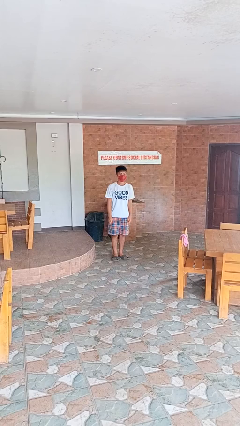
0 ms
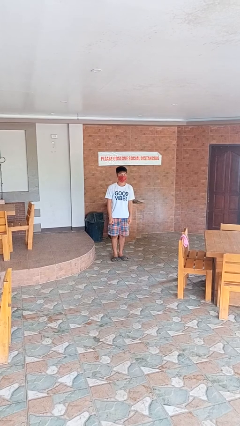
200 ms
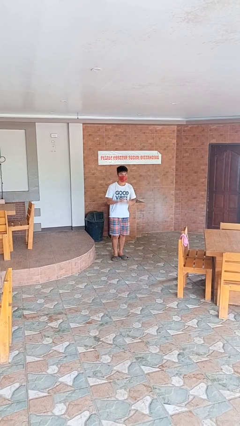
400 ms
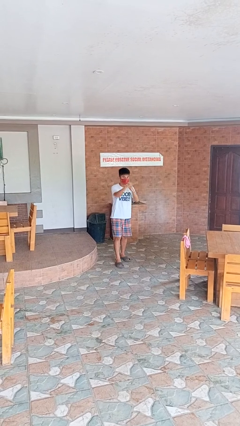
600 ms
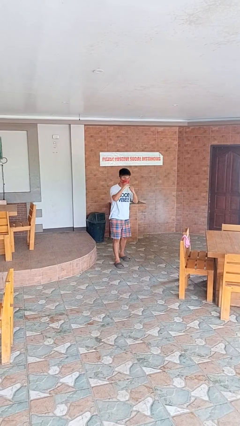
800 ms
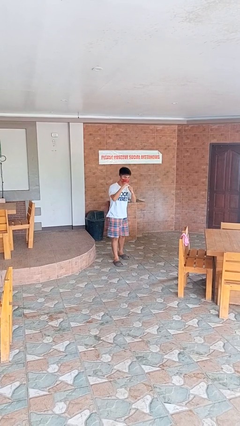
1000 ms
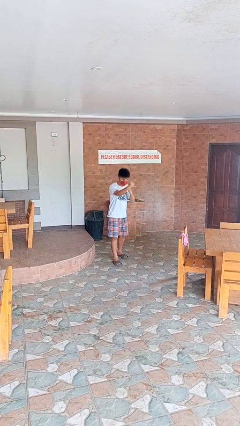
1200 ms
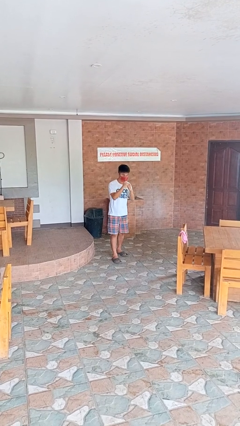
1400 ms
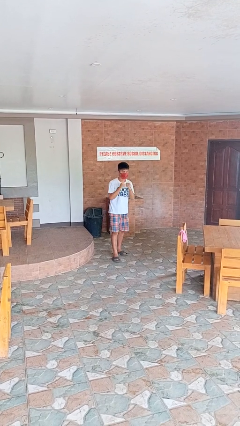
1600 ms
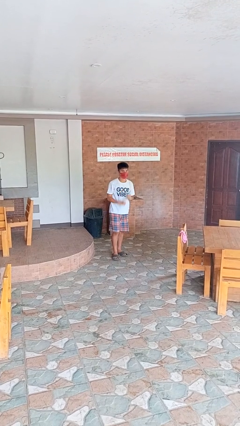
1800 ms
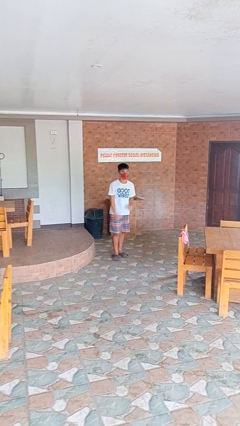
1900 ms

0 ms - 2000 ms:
person punches

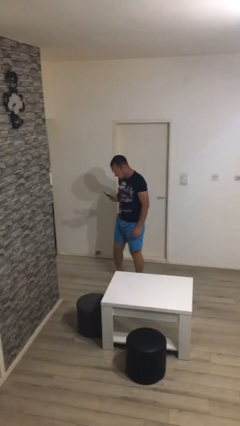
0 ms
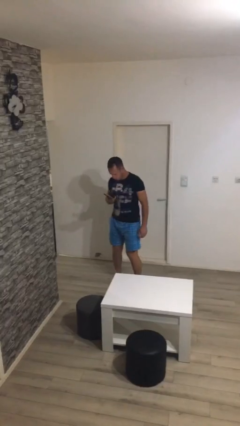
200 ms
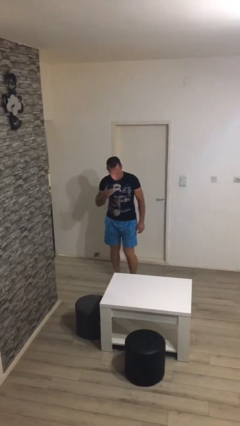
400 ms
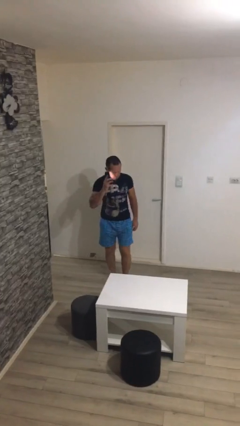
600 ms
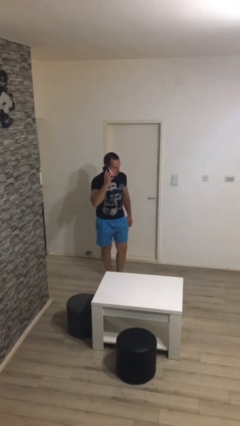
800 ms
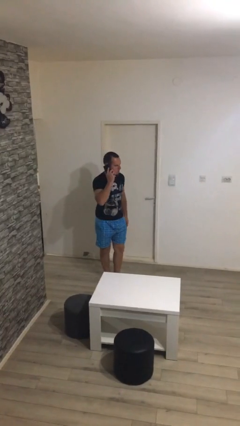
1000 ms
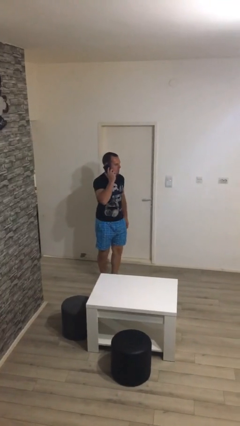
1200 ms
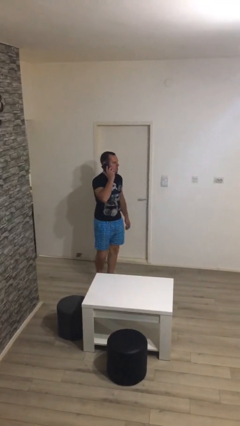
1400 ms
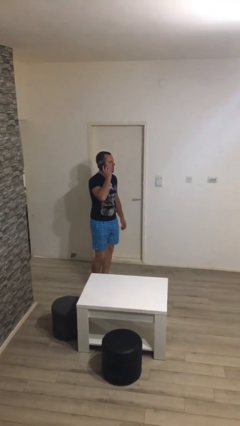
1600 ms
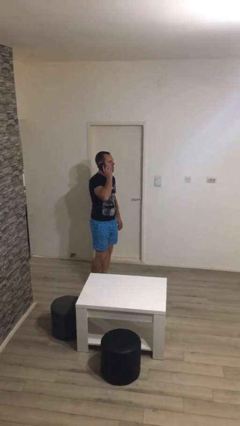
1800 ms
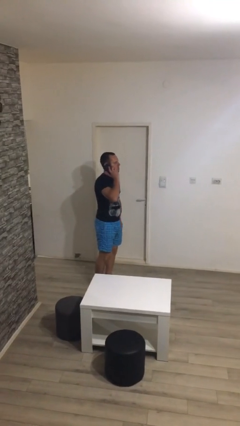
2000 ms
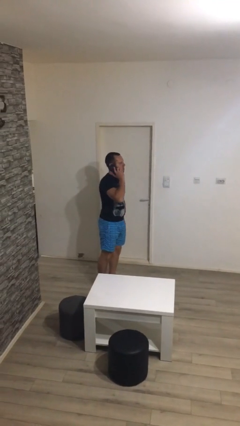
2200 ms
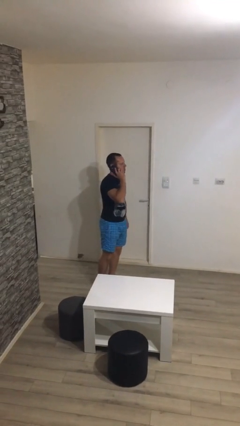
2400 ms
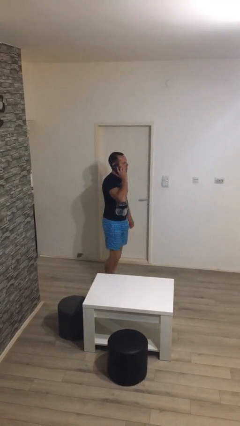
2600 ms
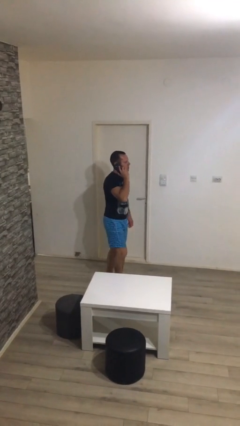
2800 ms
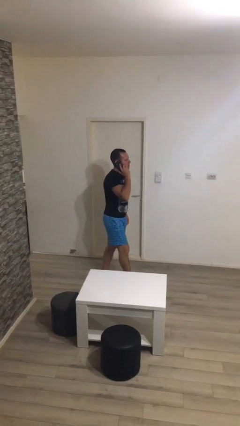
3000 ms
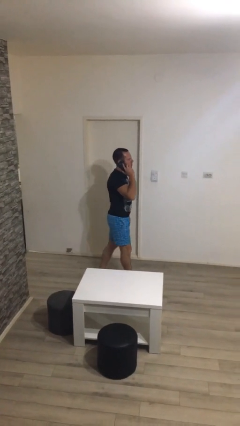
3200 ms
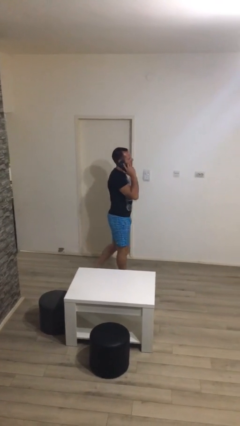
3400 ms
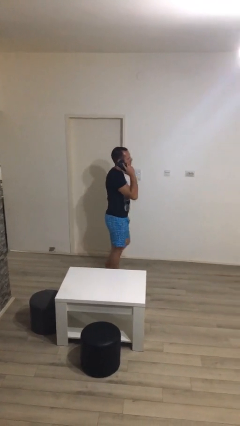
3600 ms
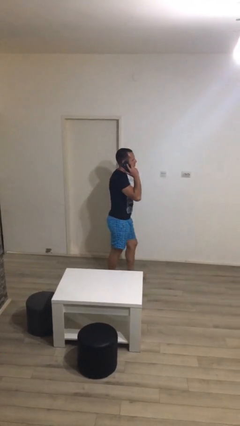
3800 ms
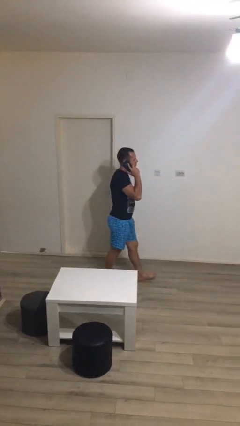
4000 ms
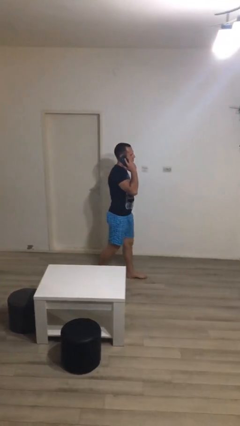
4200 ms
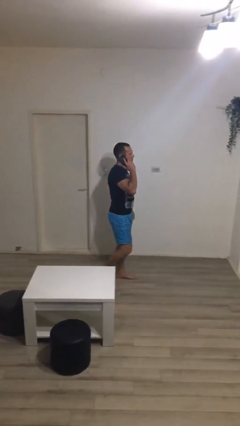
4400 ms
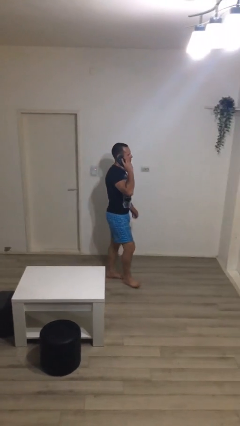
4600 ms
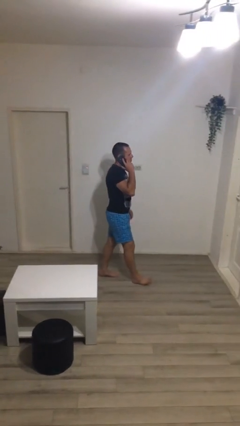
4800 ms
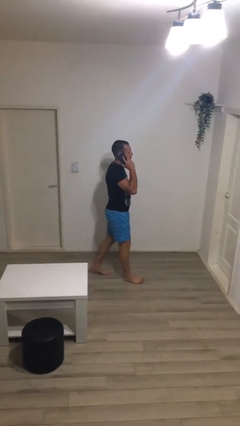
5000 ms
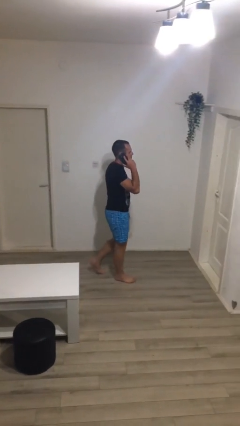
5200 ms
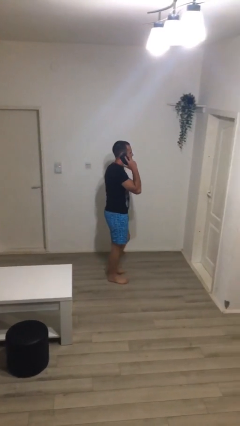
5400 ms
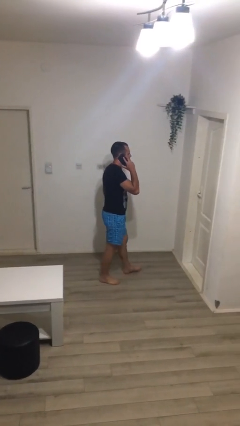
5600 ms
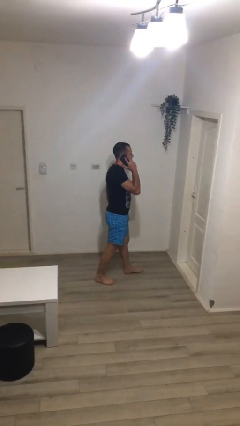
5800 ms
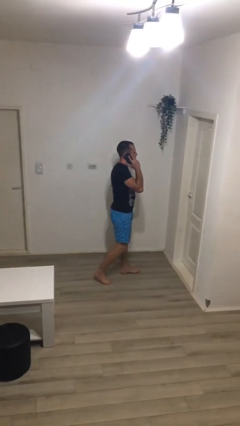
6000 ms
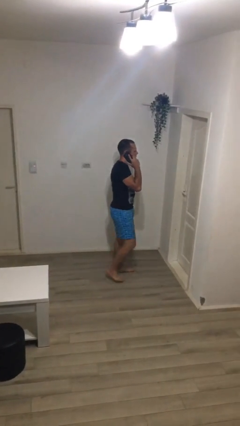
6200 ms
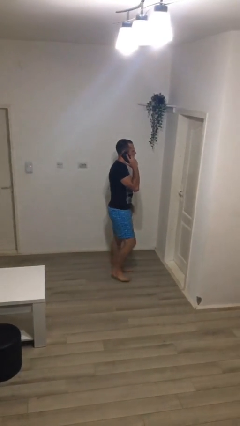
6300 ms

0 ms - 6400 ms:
person talks on phone

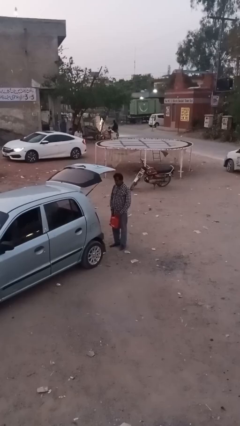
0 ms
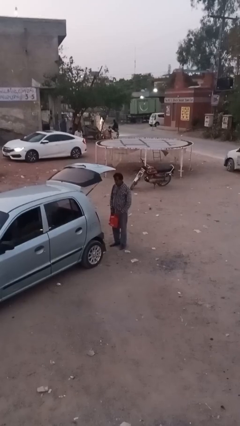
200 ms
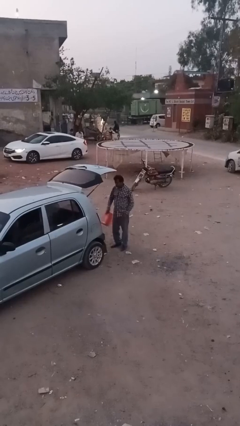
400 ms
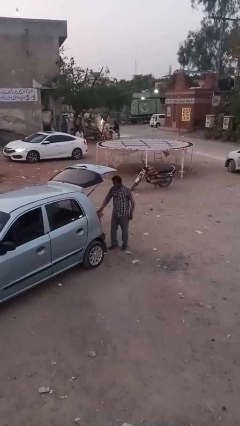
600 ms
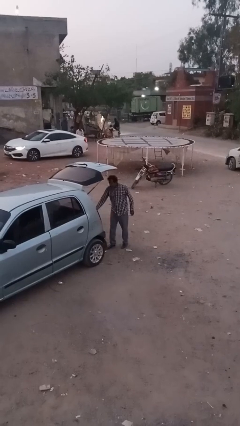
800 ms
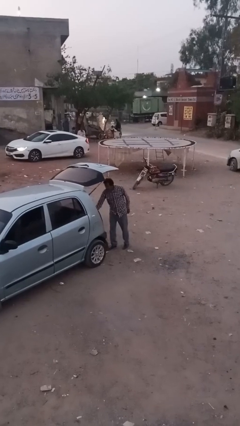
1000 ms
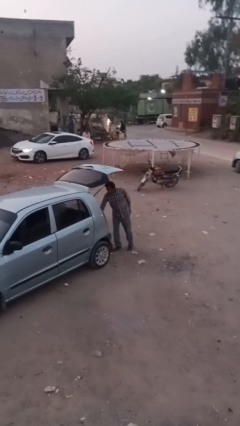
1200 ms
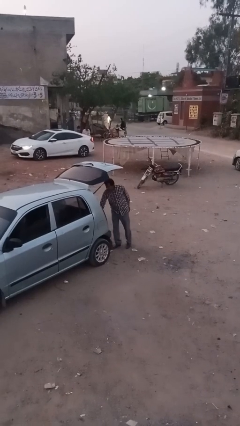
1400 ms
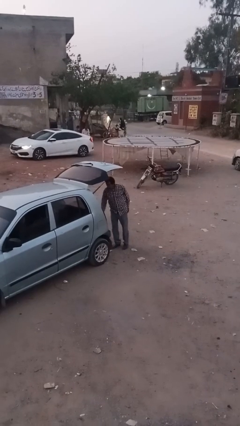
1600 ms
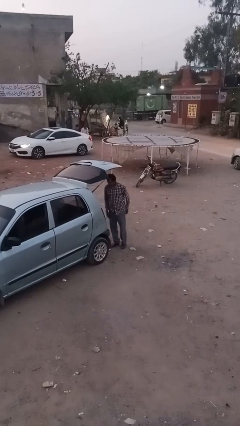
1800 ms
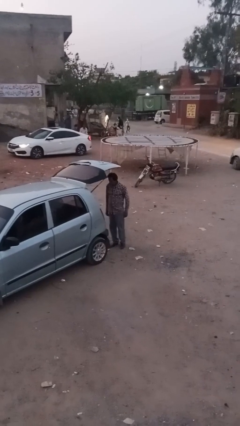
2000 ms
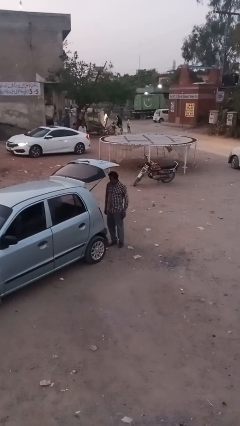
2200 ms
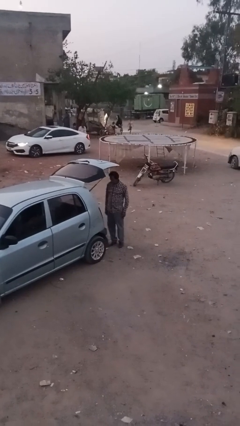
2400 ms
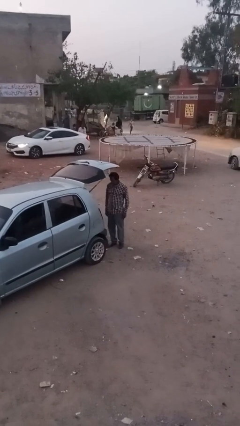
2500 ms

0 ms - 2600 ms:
person loads car

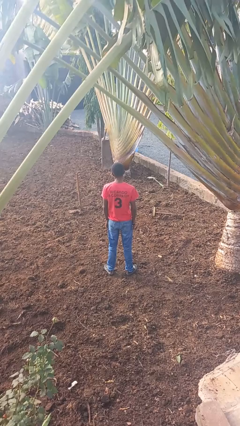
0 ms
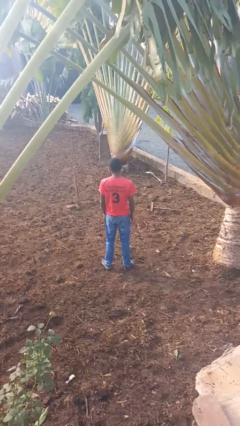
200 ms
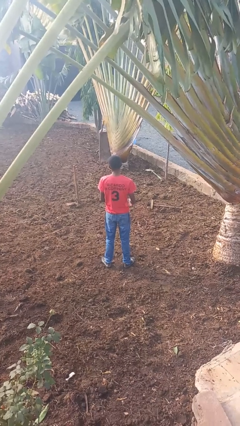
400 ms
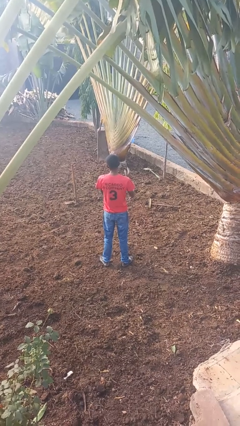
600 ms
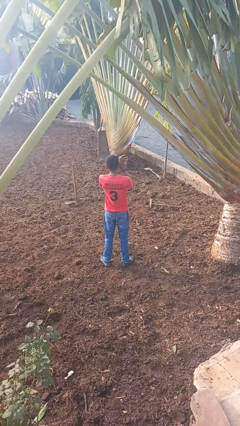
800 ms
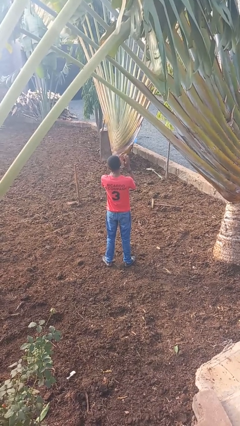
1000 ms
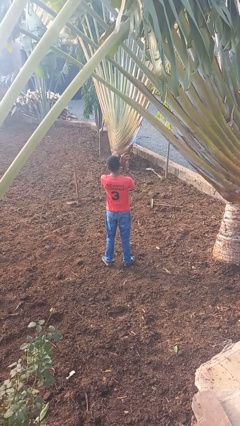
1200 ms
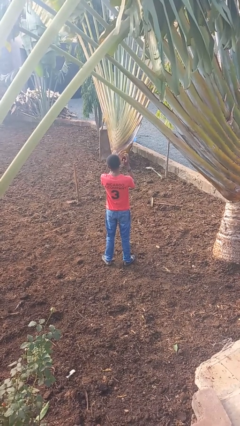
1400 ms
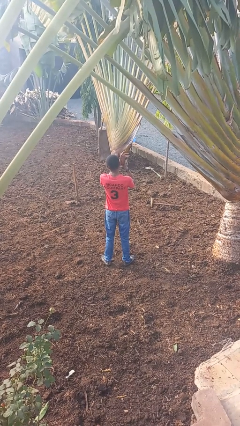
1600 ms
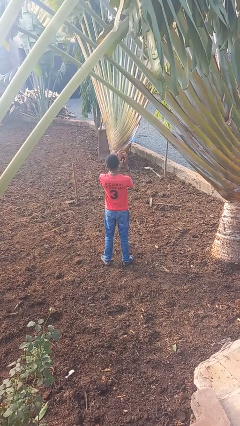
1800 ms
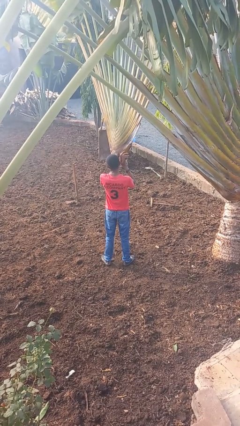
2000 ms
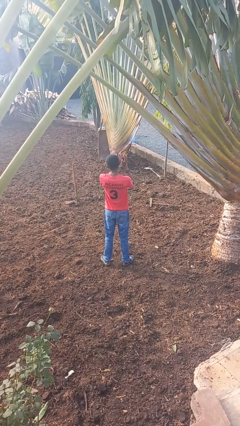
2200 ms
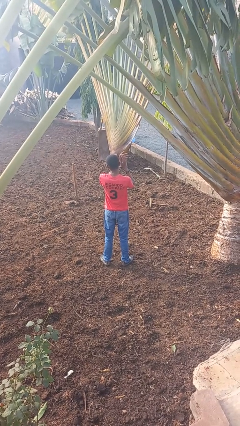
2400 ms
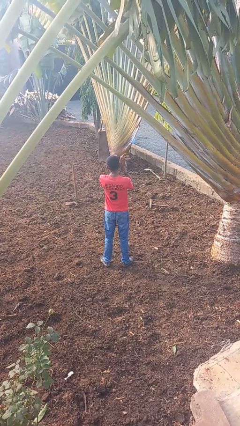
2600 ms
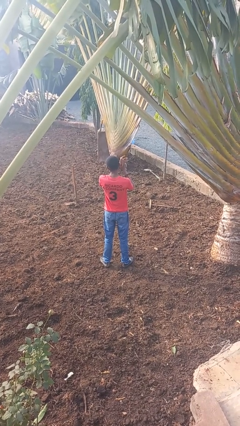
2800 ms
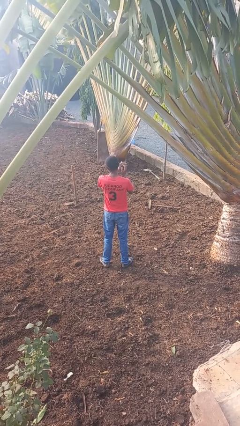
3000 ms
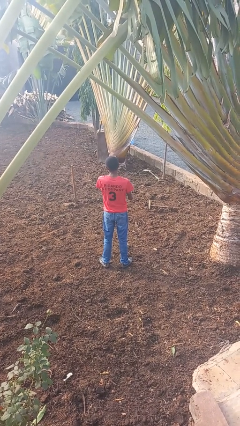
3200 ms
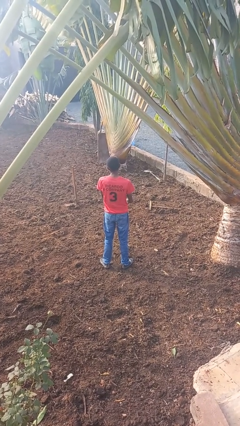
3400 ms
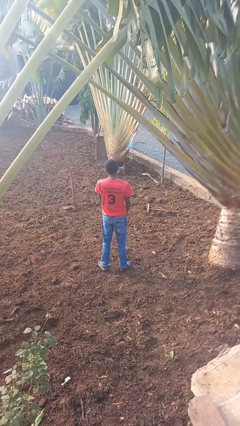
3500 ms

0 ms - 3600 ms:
person claps hands

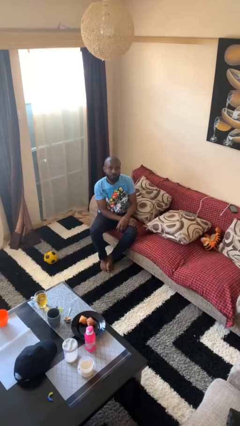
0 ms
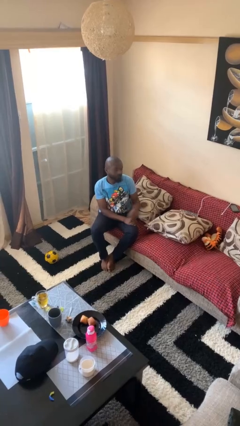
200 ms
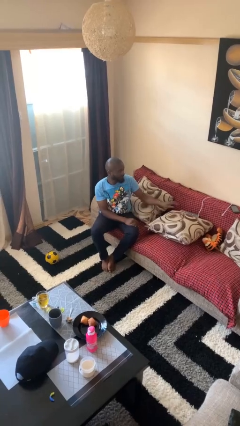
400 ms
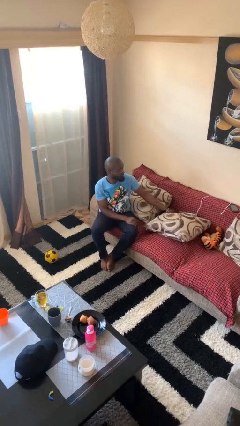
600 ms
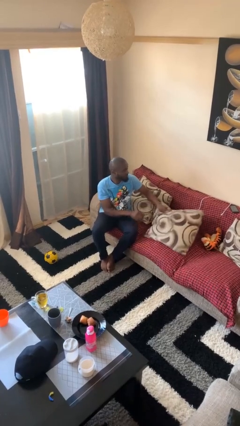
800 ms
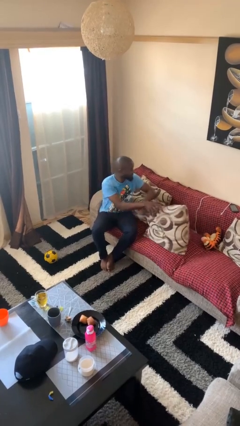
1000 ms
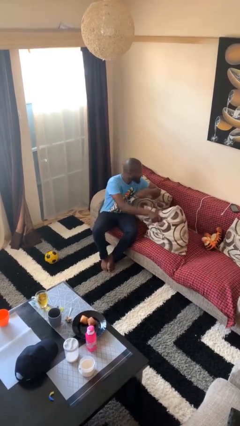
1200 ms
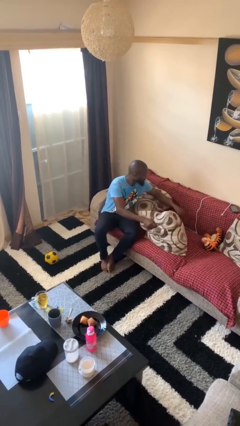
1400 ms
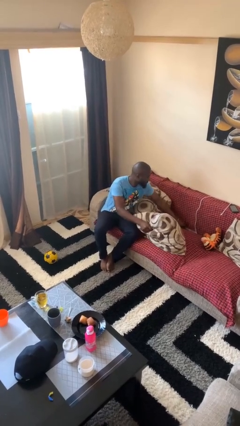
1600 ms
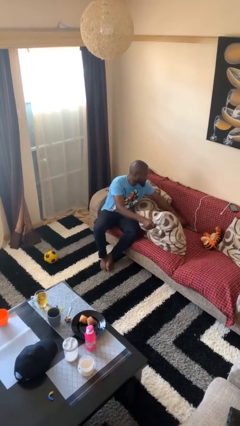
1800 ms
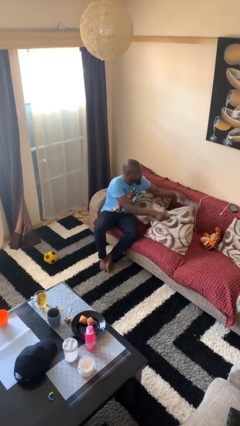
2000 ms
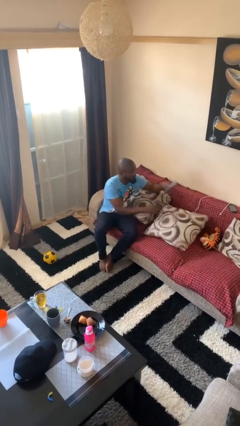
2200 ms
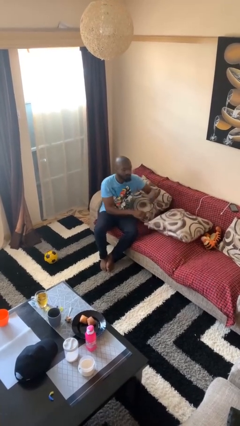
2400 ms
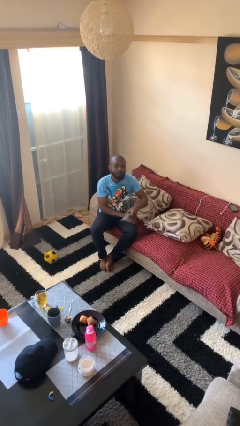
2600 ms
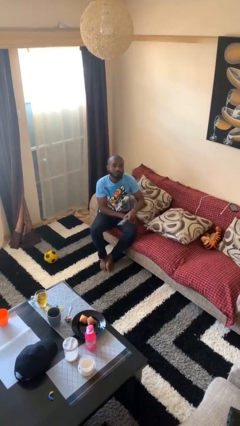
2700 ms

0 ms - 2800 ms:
person searches in couch

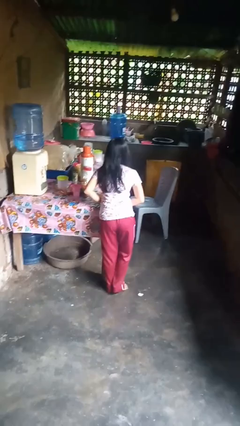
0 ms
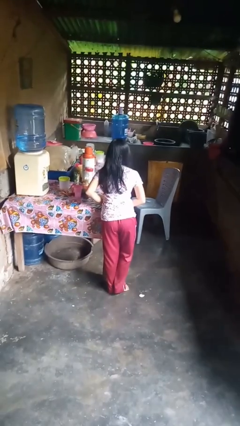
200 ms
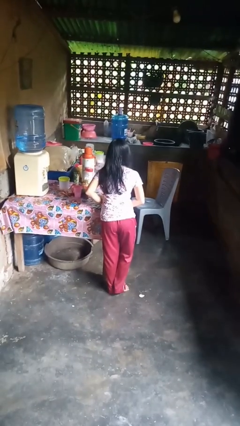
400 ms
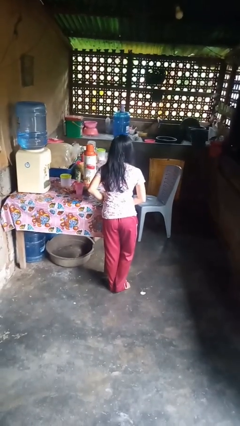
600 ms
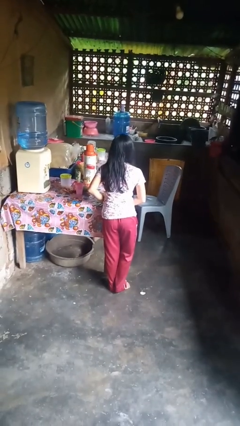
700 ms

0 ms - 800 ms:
person bumps into table
